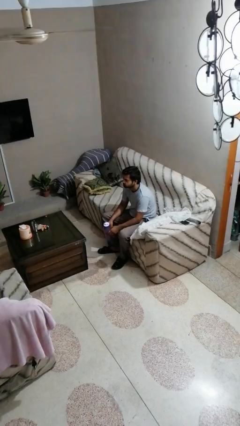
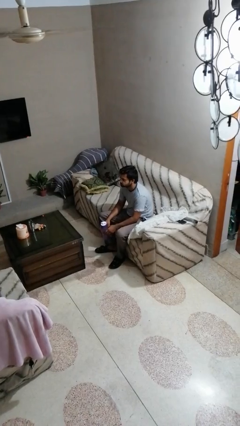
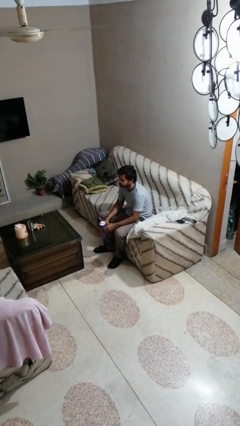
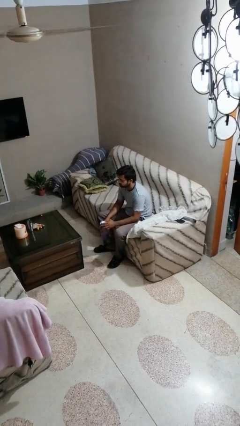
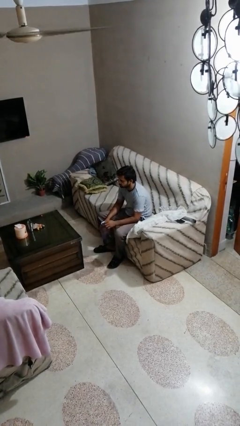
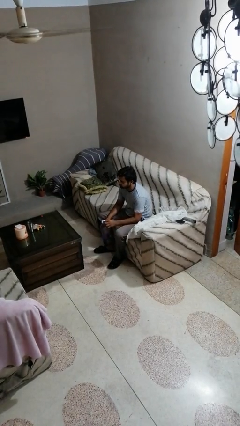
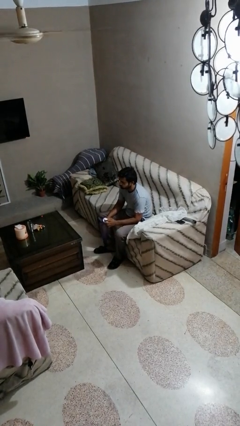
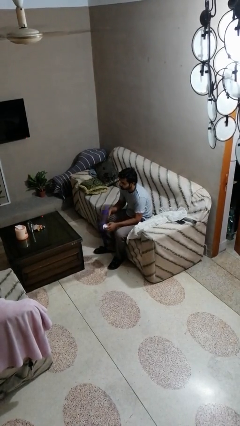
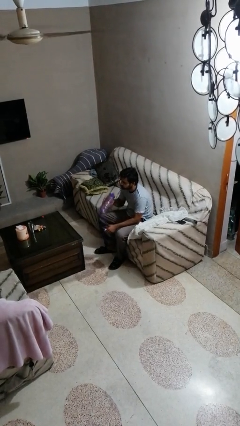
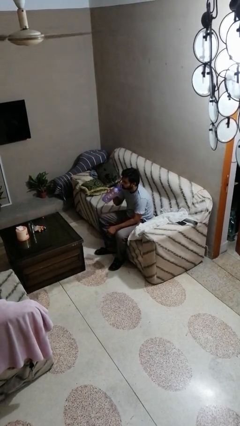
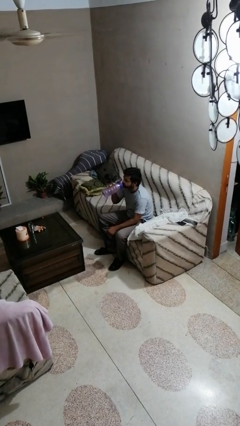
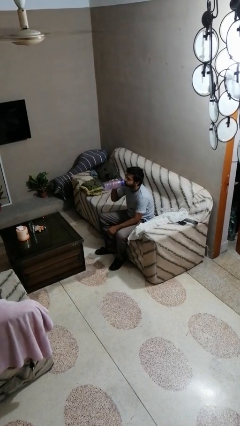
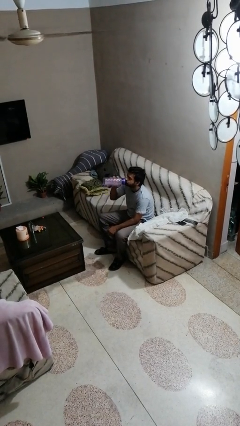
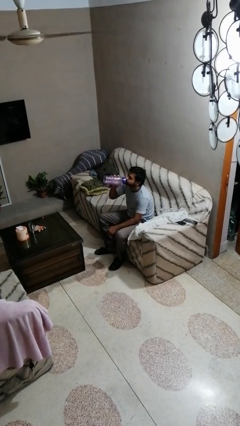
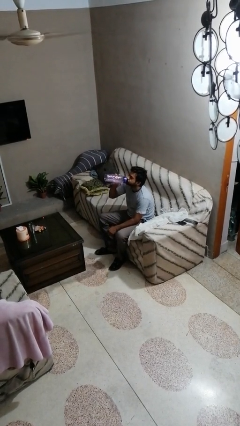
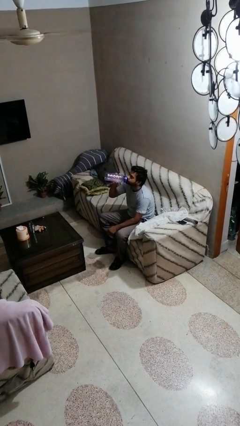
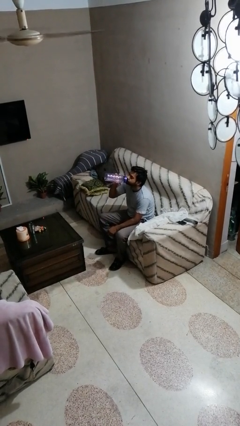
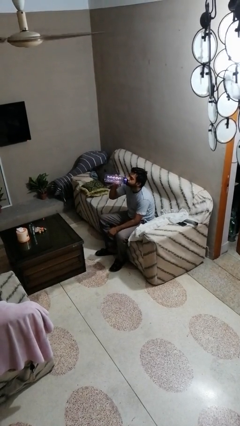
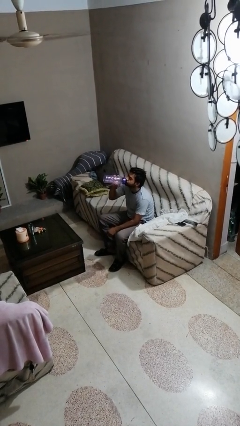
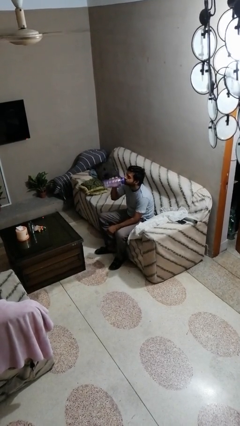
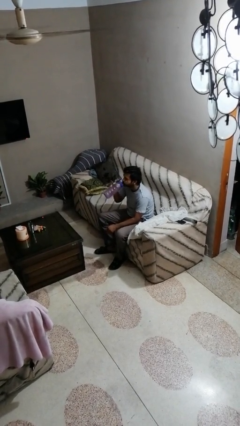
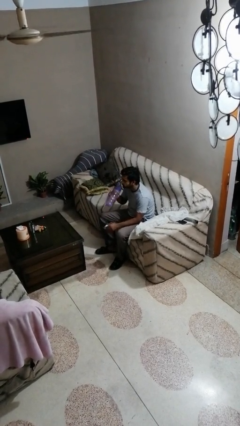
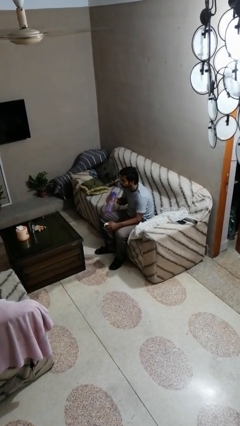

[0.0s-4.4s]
person drinks from bottle

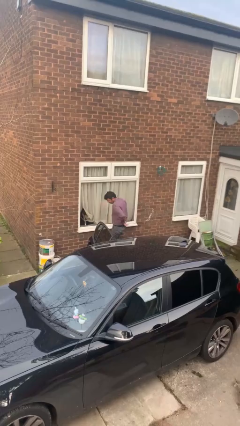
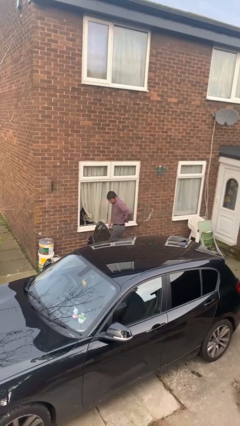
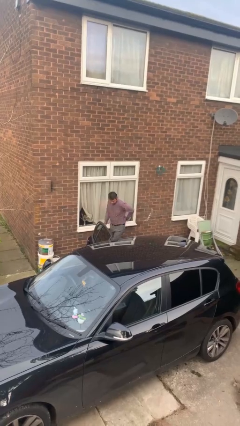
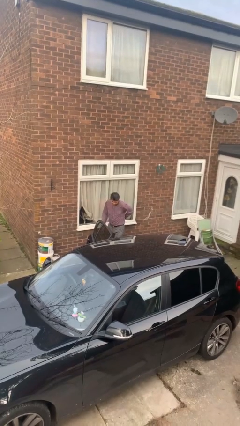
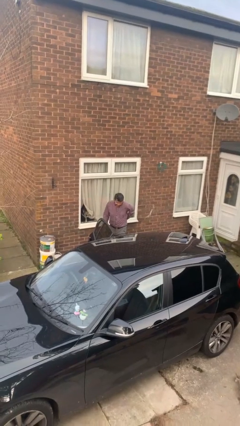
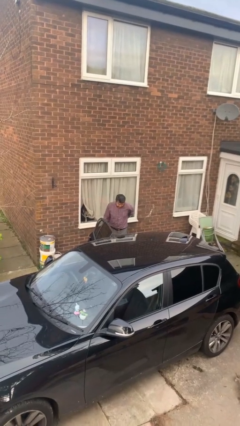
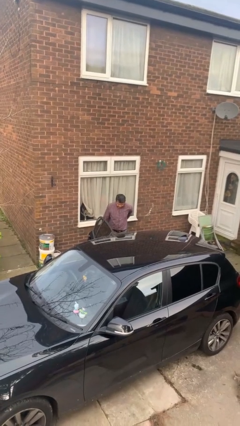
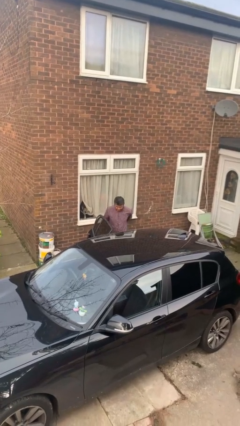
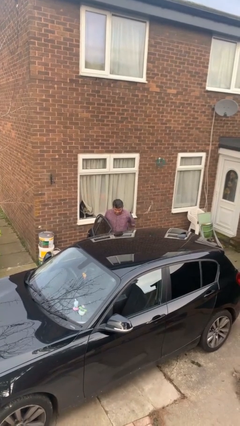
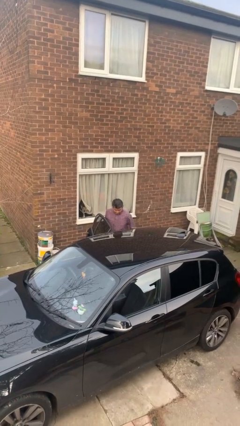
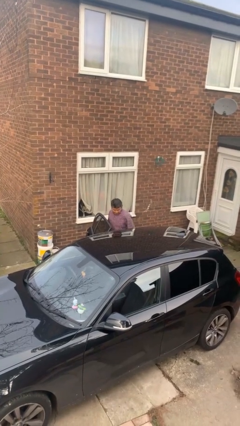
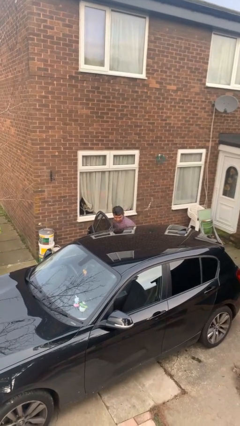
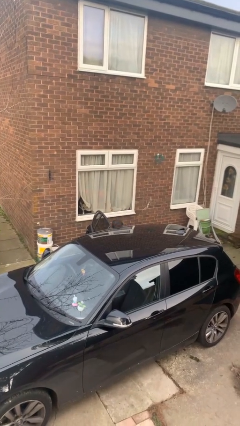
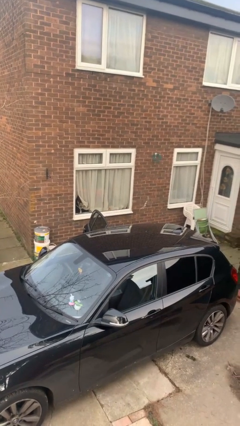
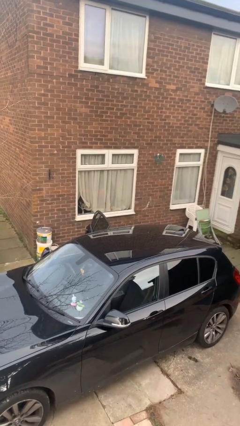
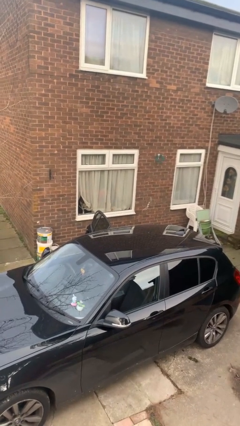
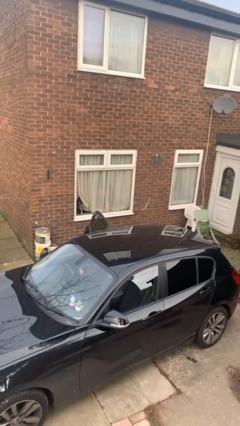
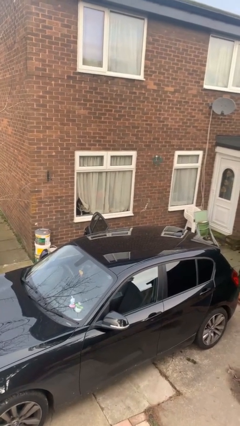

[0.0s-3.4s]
person enters car

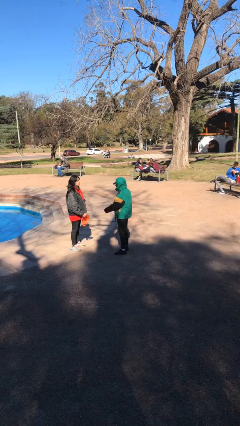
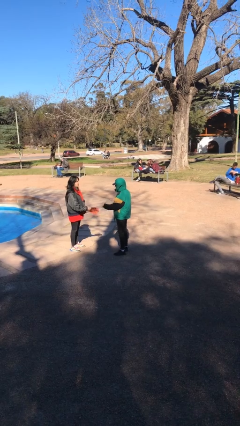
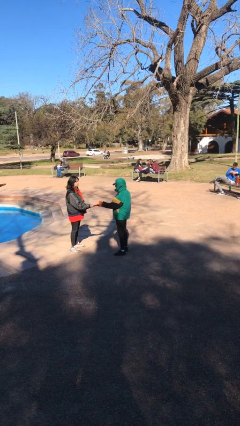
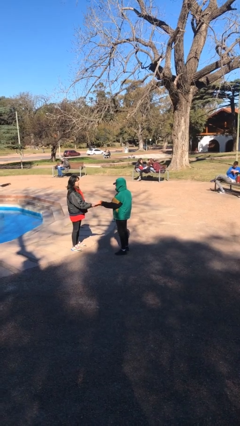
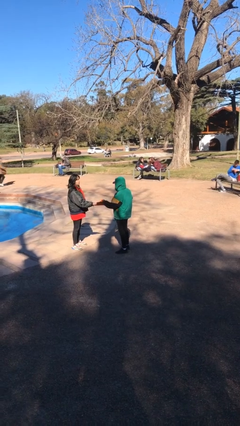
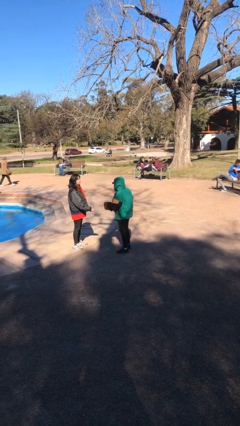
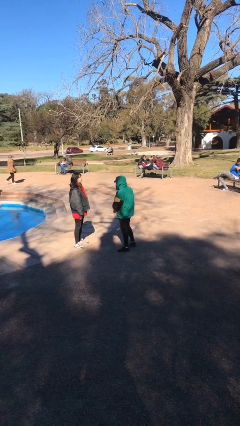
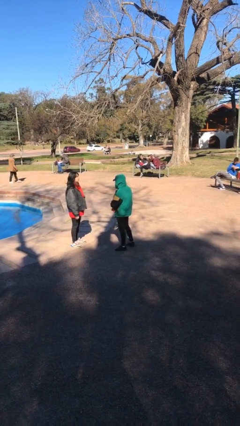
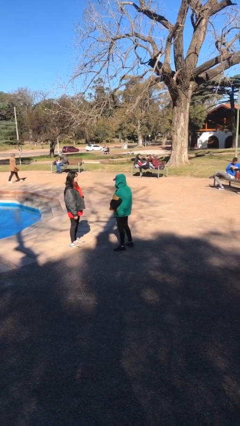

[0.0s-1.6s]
person transfers object to person

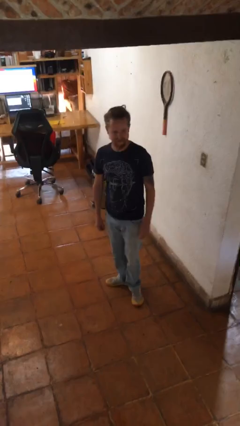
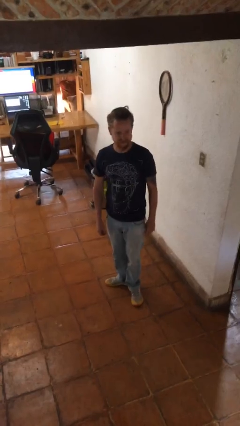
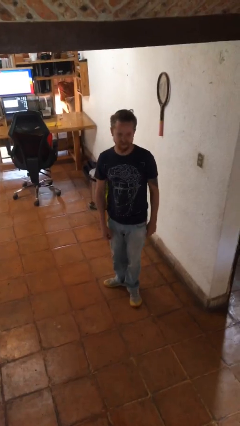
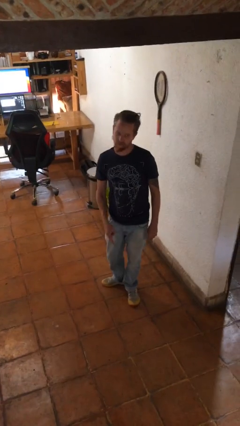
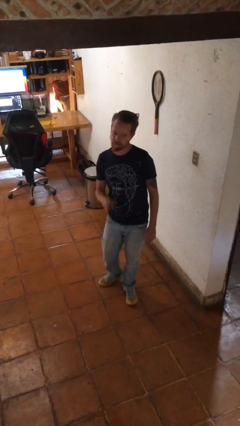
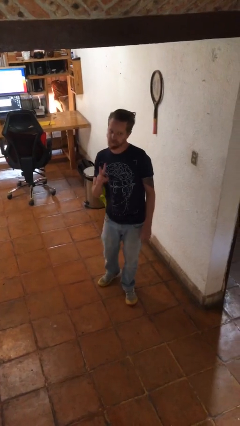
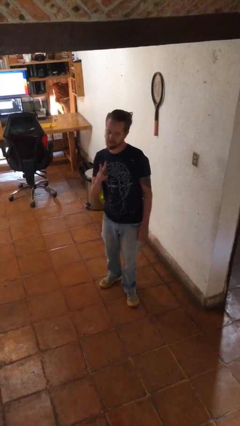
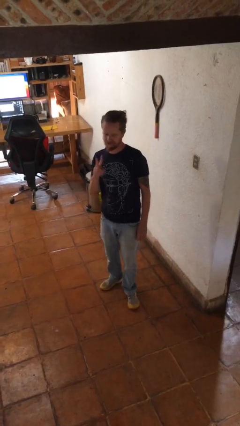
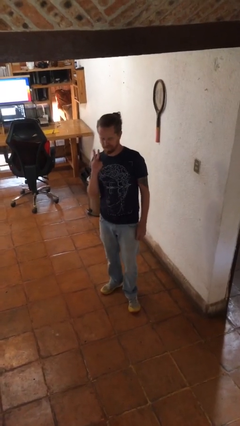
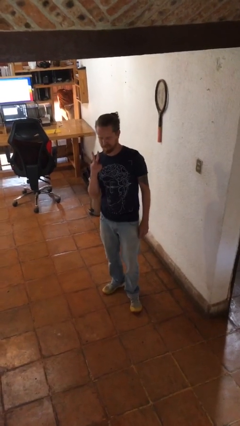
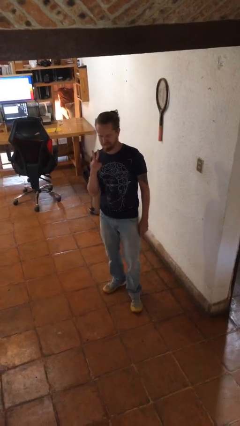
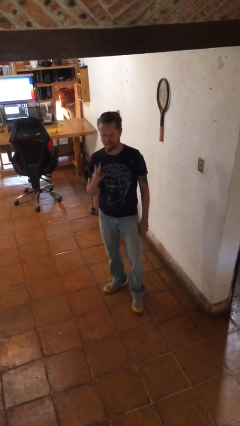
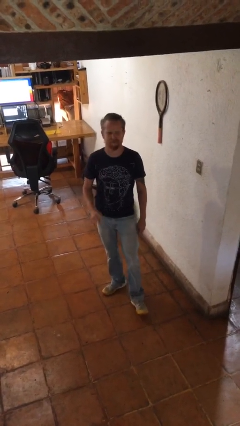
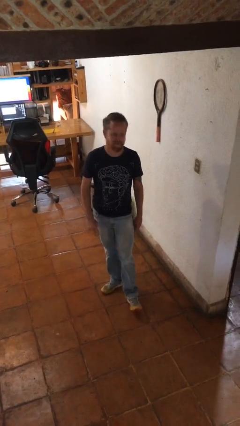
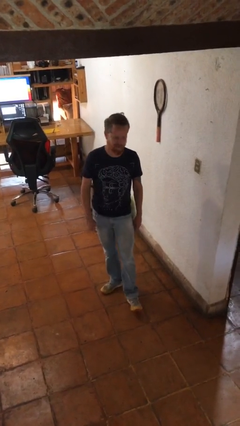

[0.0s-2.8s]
person gestures peace

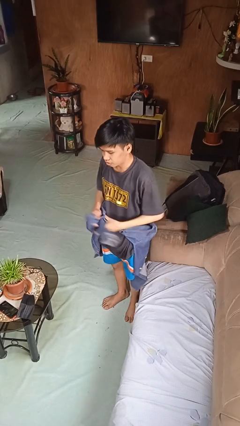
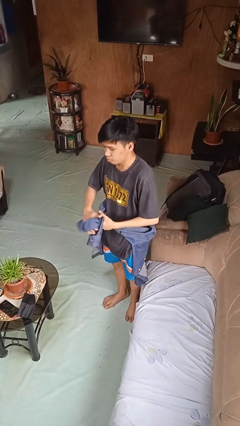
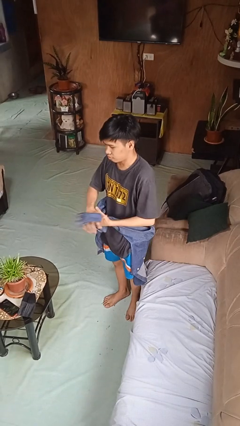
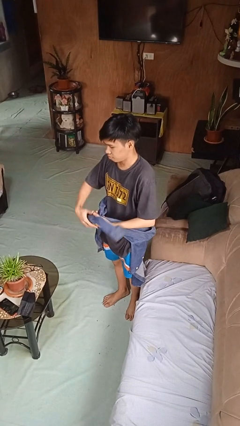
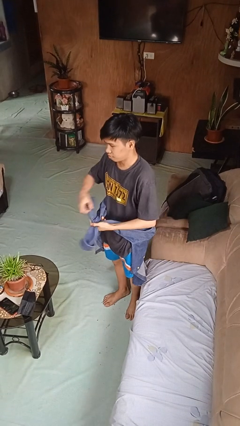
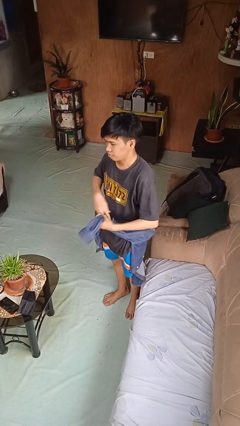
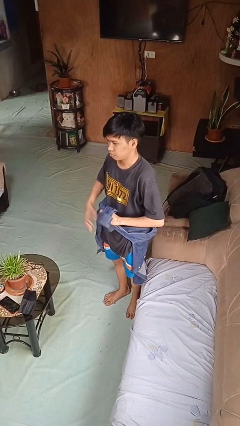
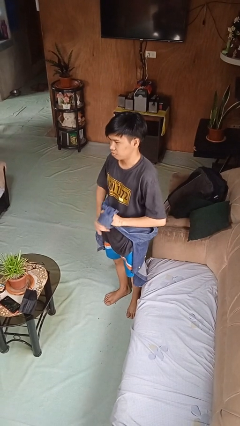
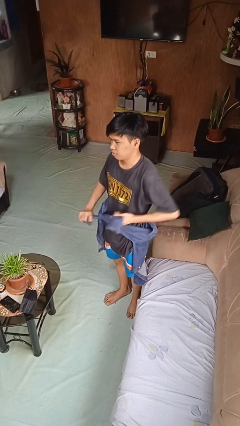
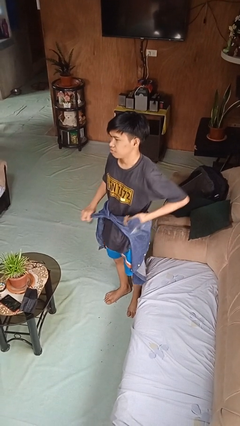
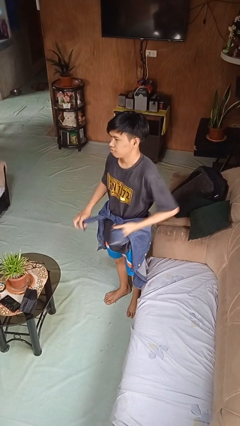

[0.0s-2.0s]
person ties jacket around waist

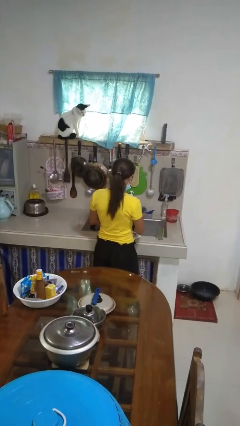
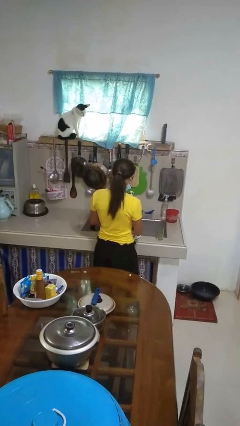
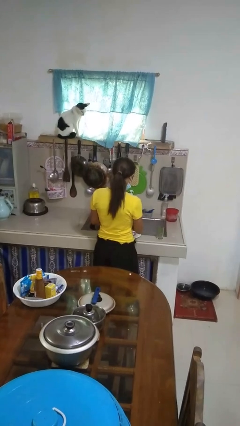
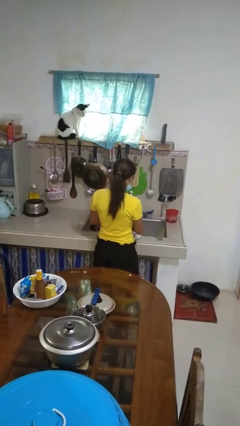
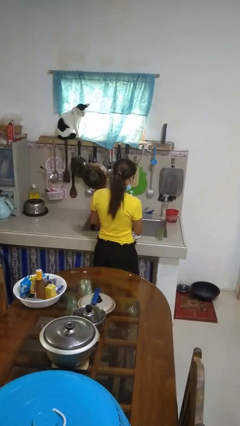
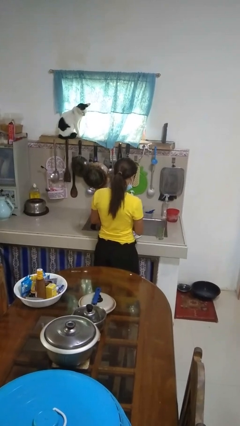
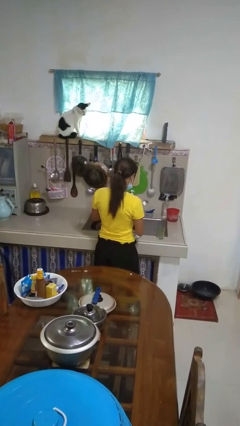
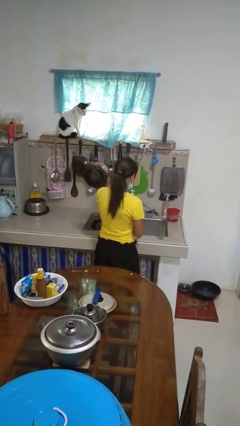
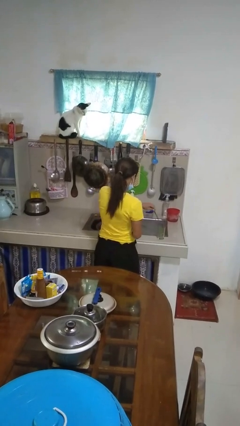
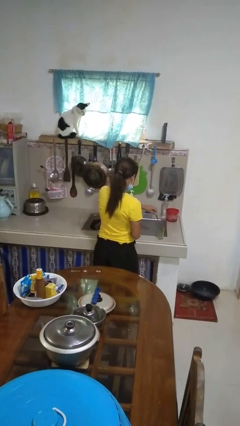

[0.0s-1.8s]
person dries dish

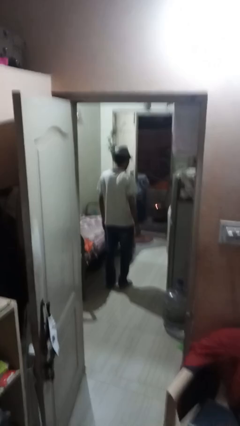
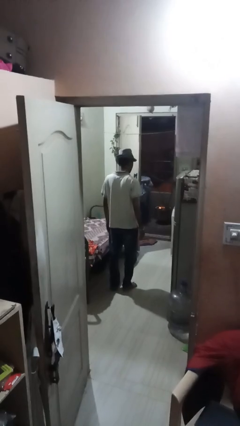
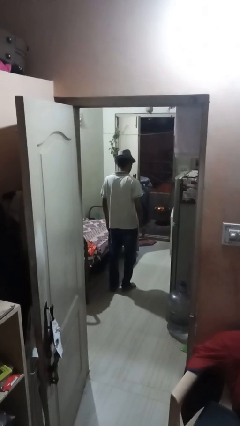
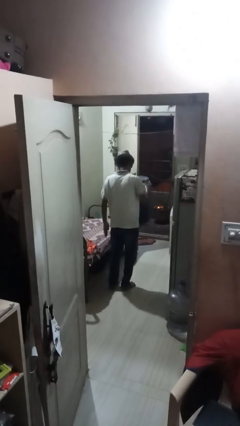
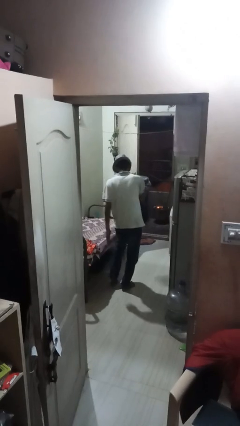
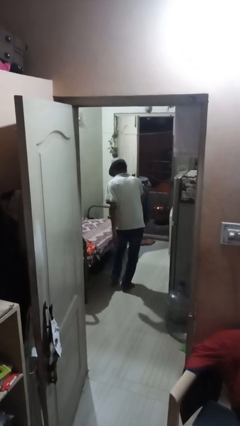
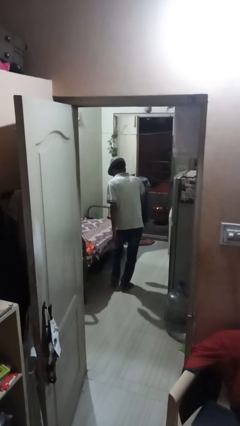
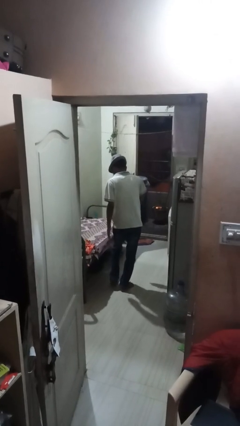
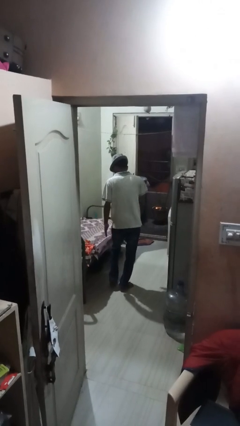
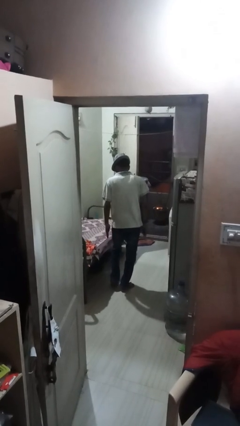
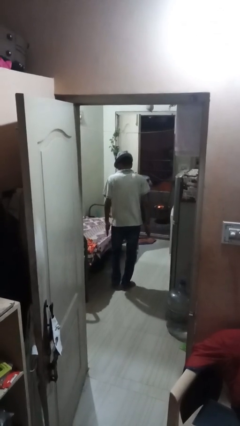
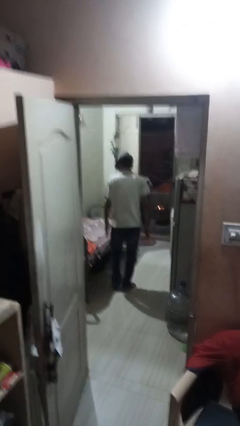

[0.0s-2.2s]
person swats bug
